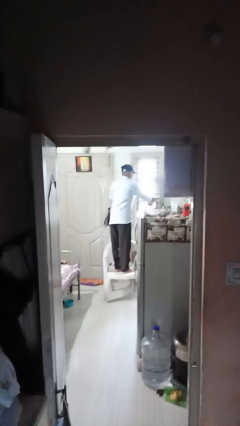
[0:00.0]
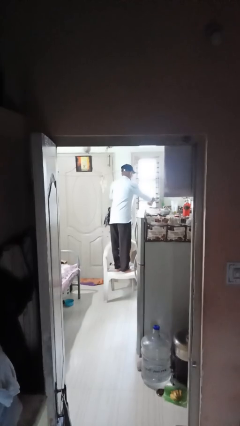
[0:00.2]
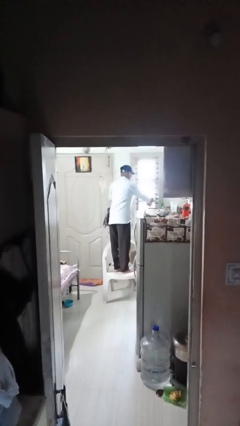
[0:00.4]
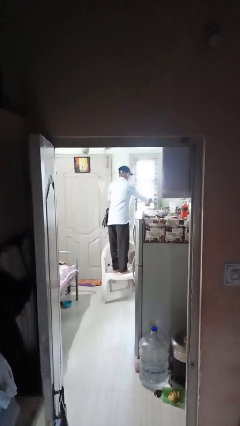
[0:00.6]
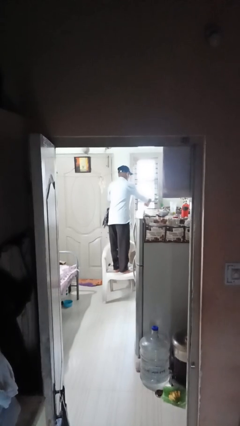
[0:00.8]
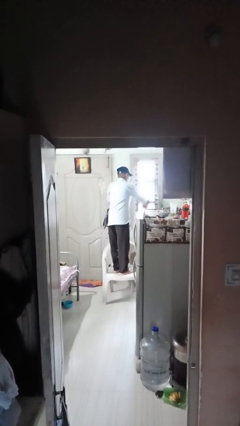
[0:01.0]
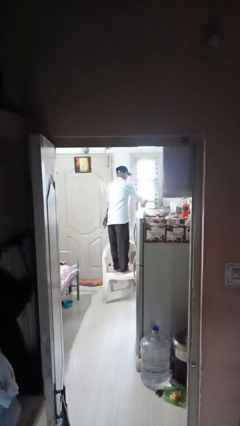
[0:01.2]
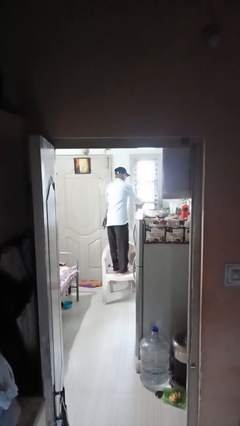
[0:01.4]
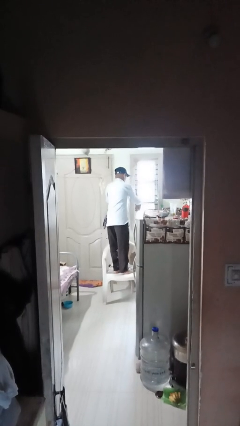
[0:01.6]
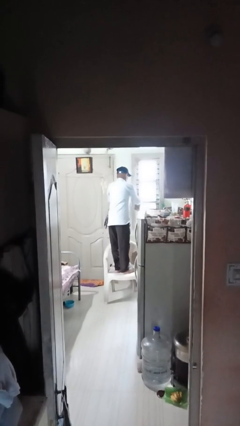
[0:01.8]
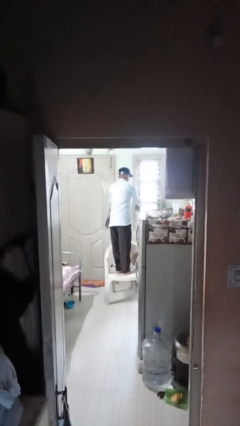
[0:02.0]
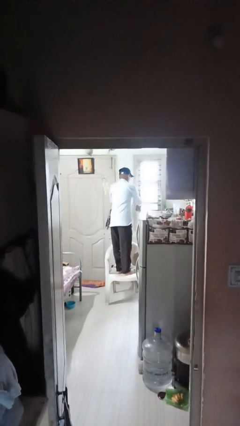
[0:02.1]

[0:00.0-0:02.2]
person sprays from bottle

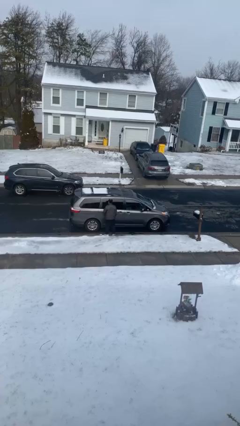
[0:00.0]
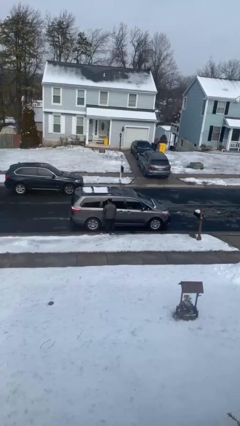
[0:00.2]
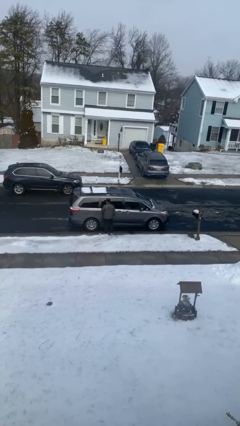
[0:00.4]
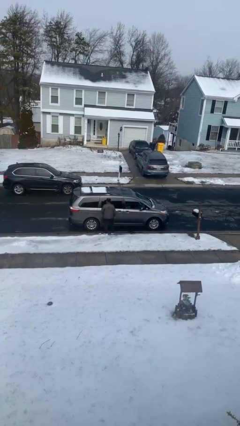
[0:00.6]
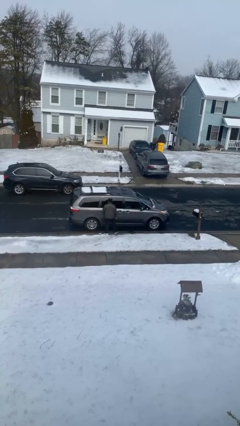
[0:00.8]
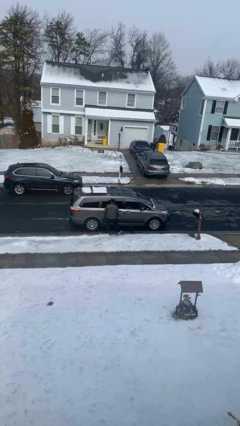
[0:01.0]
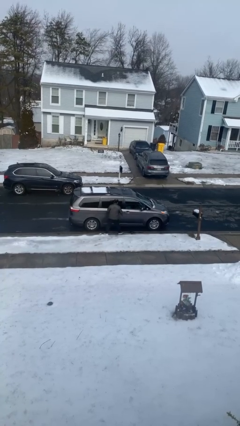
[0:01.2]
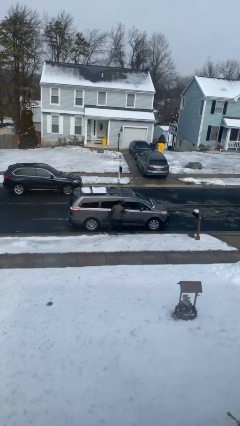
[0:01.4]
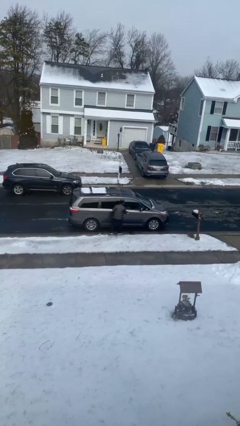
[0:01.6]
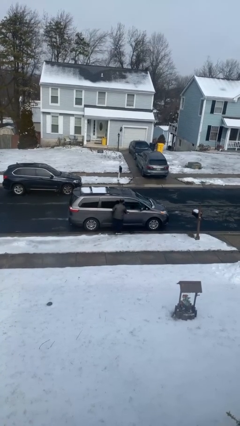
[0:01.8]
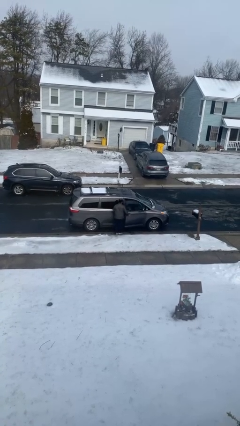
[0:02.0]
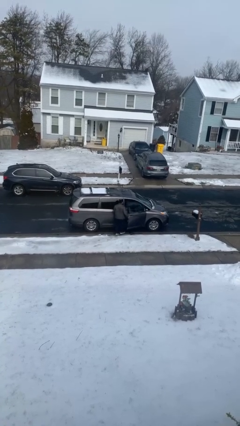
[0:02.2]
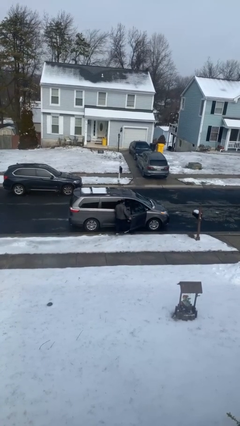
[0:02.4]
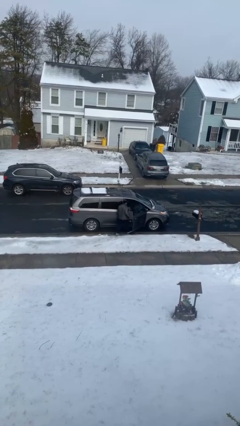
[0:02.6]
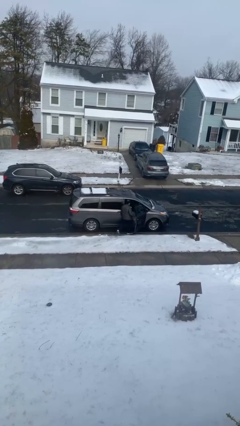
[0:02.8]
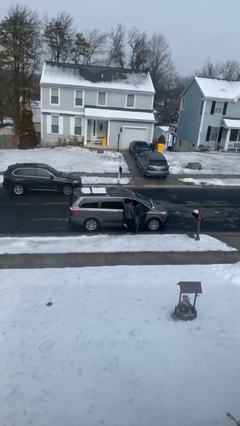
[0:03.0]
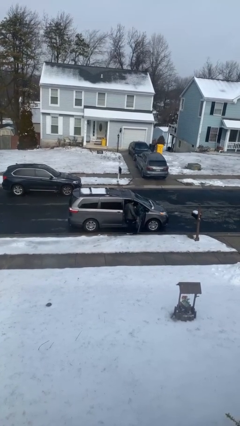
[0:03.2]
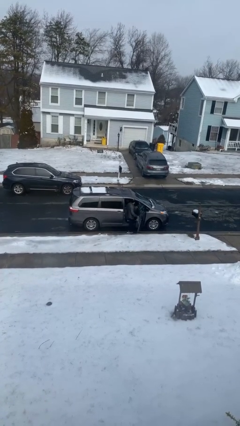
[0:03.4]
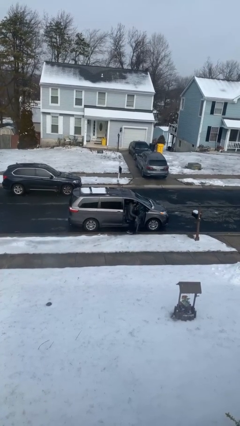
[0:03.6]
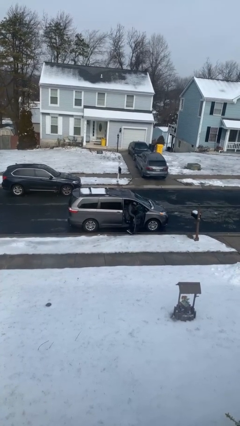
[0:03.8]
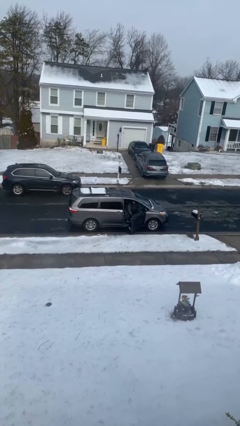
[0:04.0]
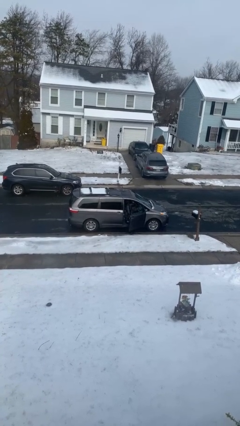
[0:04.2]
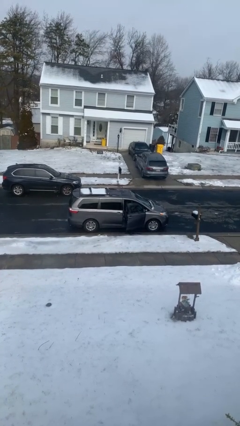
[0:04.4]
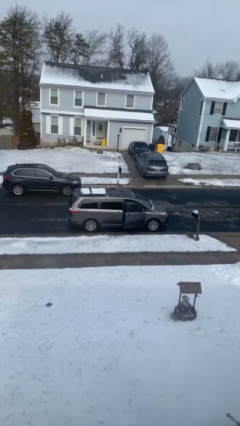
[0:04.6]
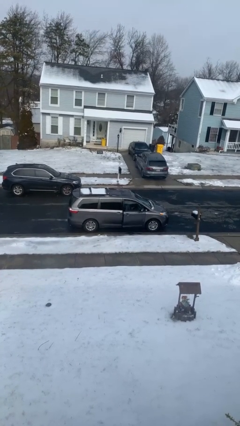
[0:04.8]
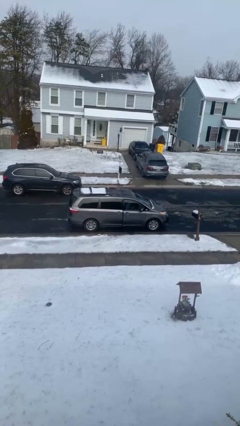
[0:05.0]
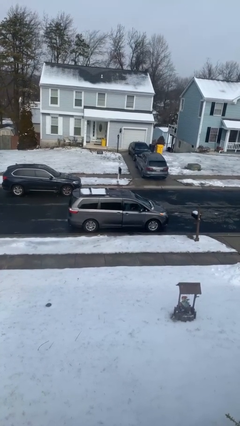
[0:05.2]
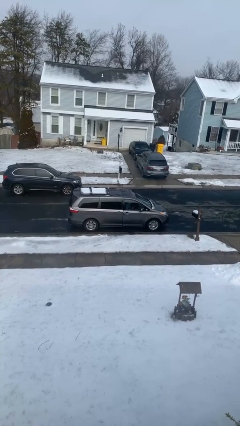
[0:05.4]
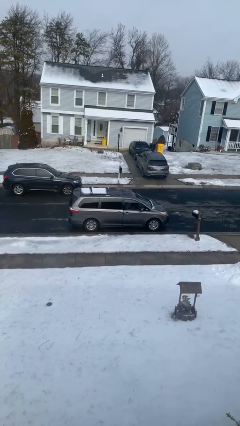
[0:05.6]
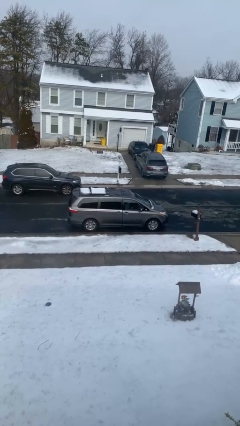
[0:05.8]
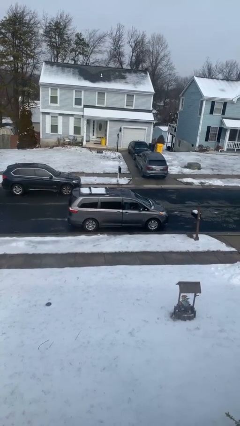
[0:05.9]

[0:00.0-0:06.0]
car picks up person

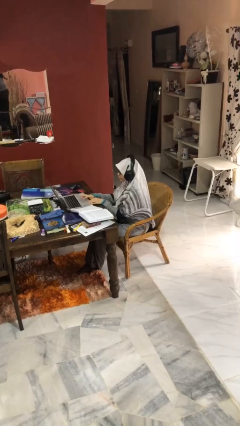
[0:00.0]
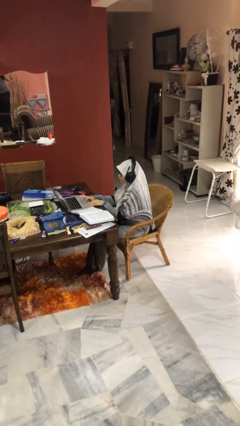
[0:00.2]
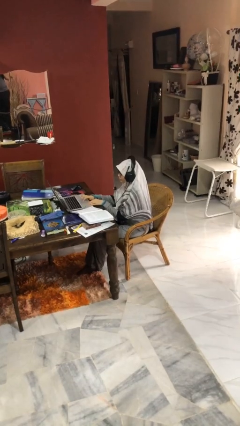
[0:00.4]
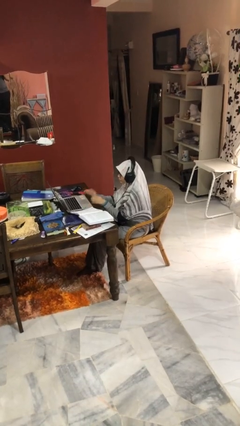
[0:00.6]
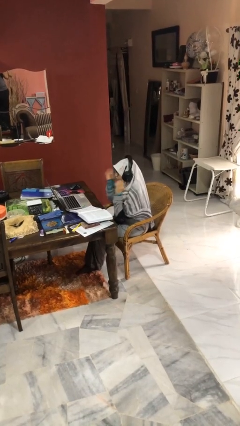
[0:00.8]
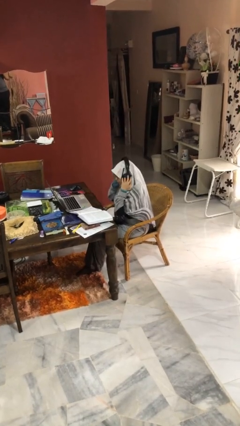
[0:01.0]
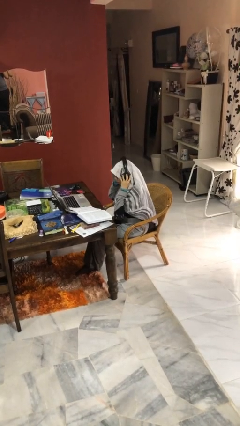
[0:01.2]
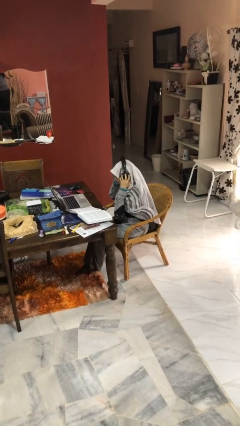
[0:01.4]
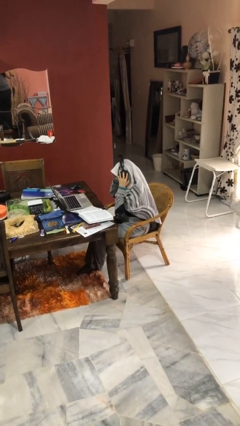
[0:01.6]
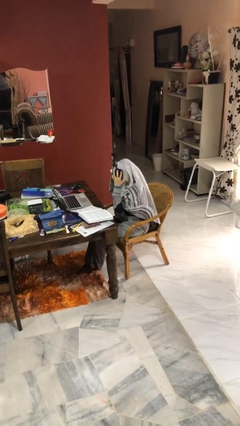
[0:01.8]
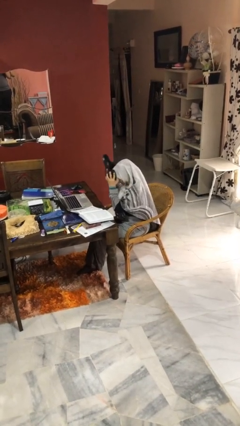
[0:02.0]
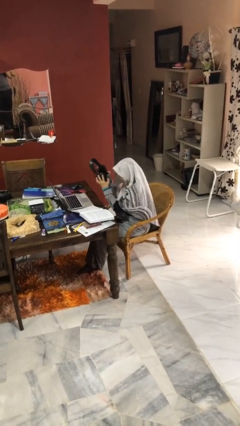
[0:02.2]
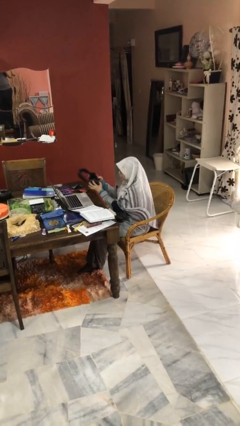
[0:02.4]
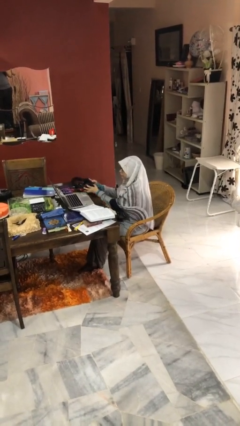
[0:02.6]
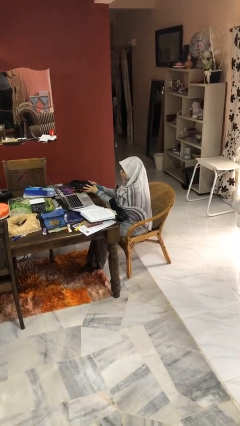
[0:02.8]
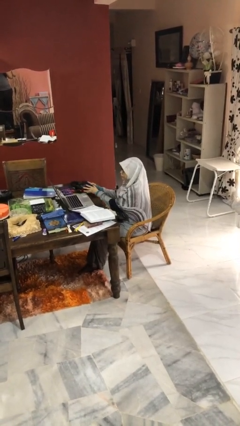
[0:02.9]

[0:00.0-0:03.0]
person takes off headphones

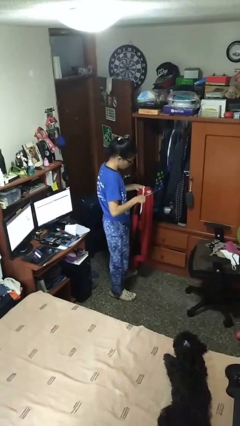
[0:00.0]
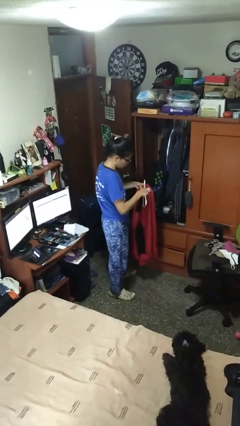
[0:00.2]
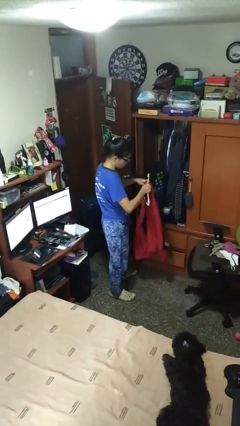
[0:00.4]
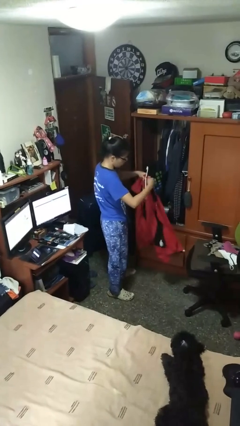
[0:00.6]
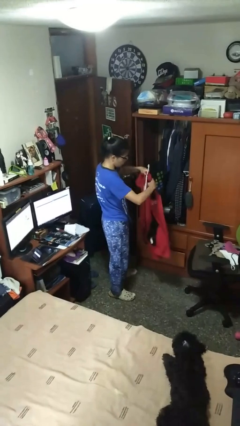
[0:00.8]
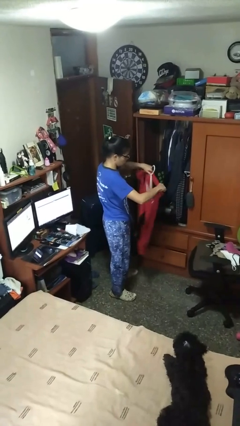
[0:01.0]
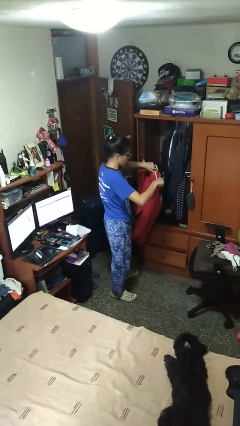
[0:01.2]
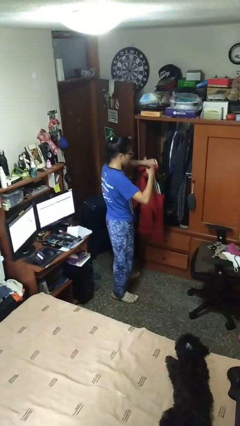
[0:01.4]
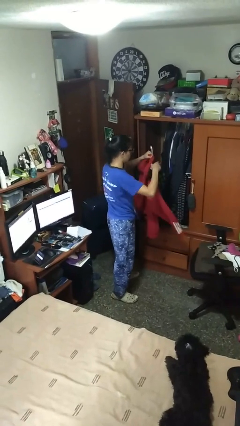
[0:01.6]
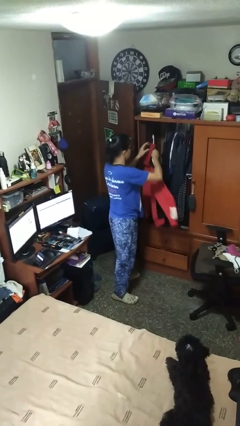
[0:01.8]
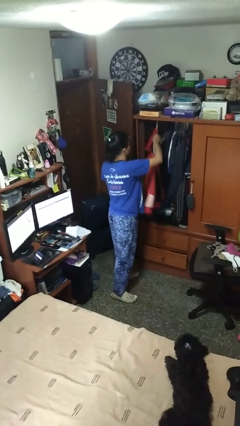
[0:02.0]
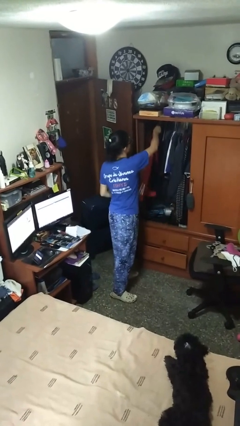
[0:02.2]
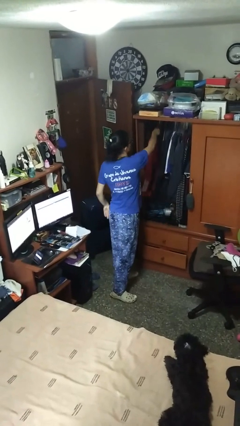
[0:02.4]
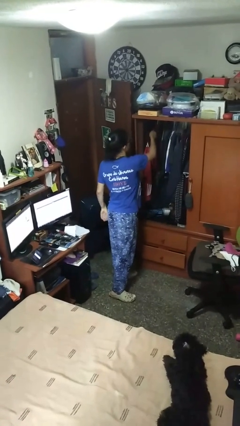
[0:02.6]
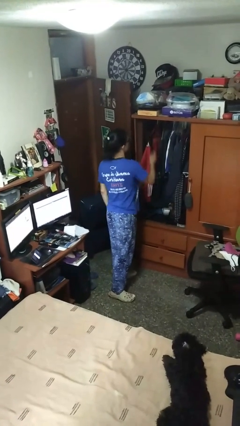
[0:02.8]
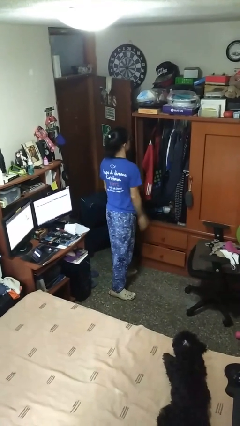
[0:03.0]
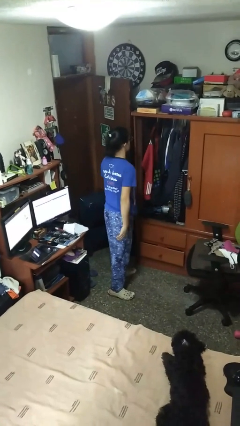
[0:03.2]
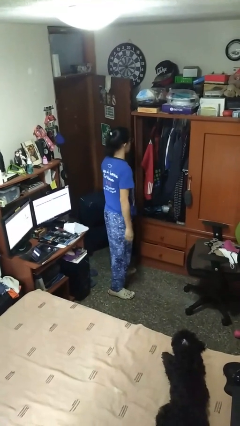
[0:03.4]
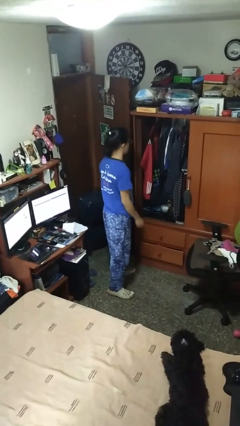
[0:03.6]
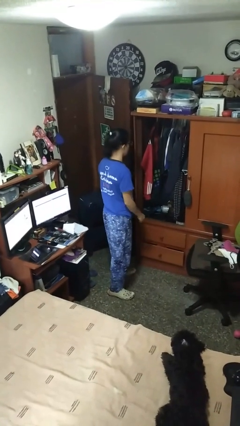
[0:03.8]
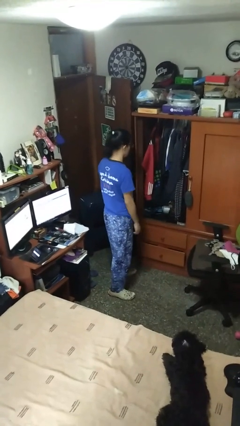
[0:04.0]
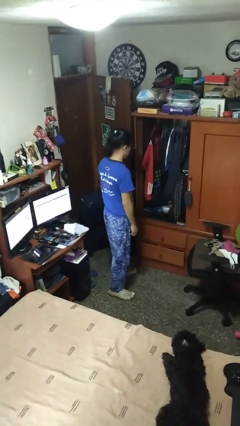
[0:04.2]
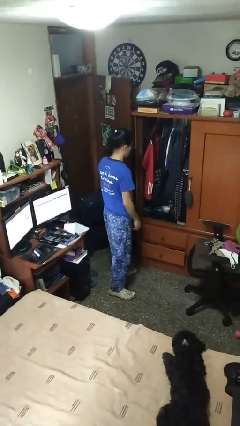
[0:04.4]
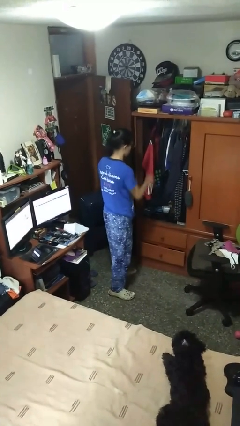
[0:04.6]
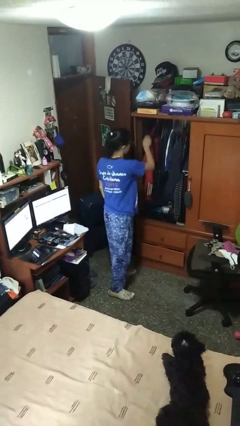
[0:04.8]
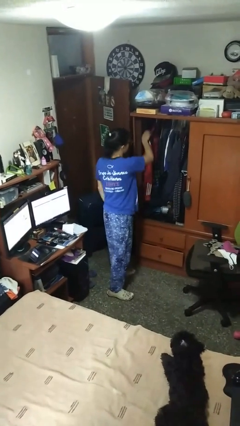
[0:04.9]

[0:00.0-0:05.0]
person puts clothes into closet

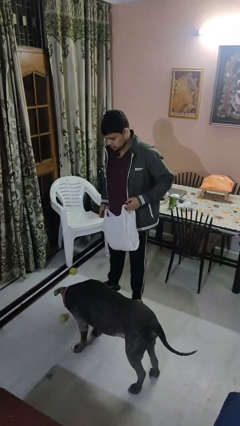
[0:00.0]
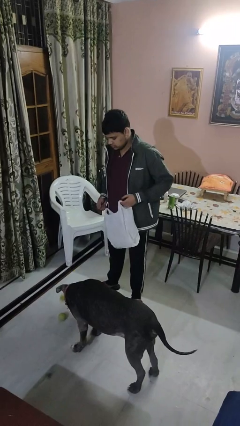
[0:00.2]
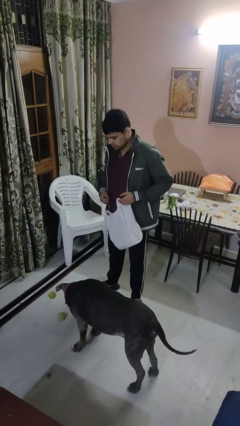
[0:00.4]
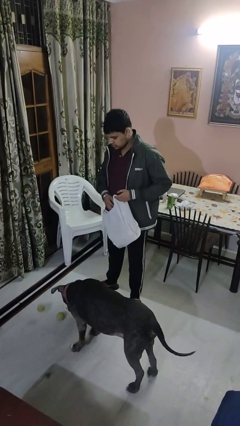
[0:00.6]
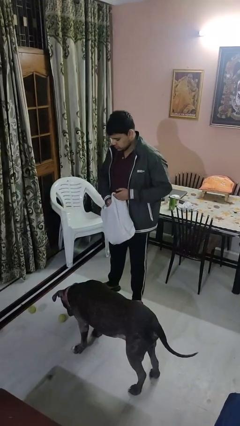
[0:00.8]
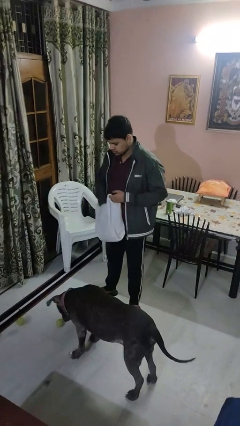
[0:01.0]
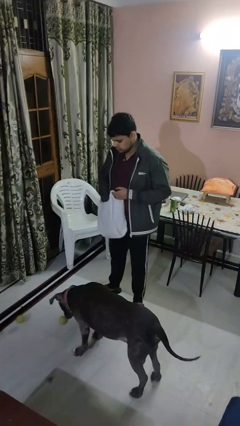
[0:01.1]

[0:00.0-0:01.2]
person throws object to dog

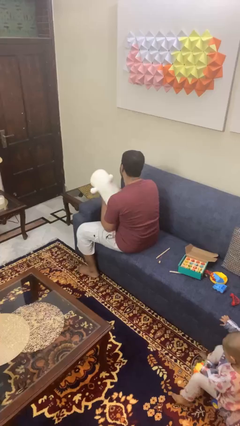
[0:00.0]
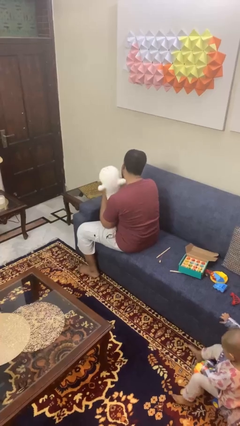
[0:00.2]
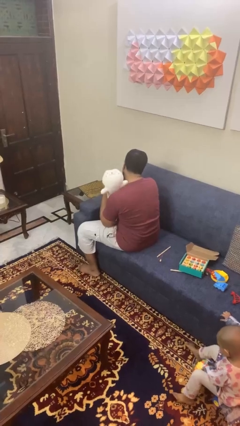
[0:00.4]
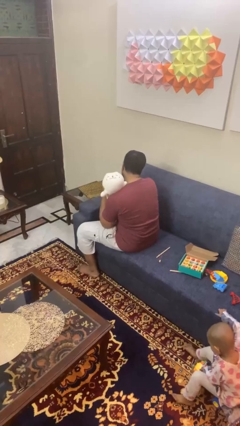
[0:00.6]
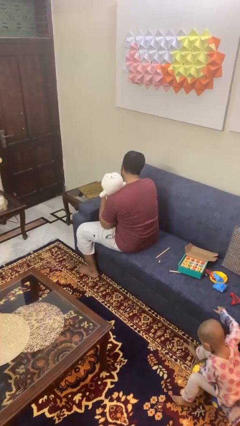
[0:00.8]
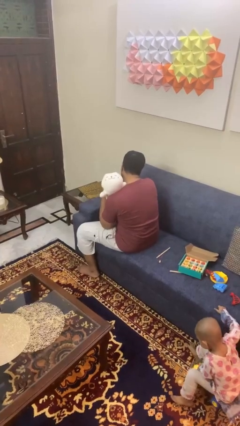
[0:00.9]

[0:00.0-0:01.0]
person hugs stuffed animal
